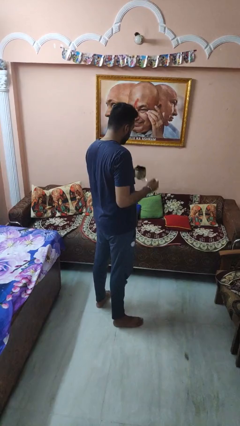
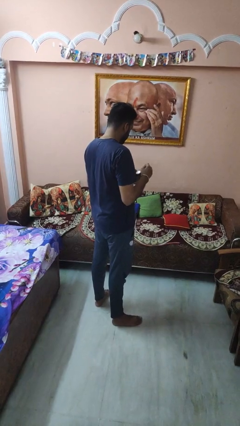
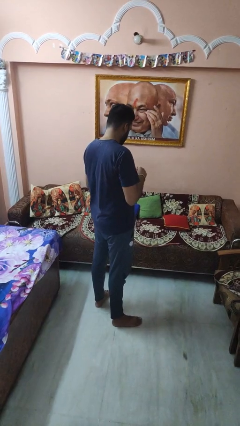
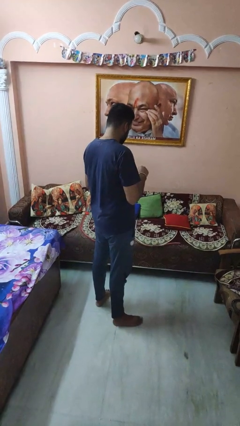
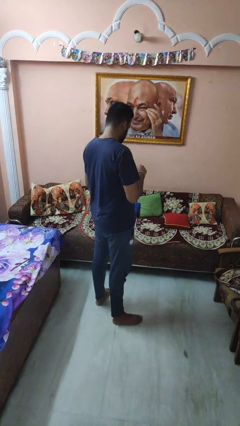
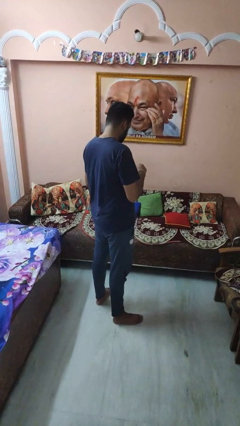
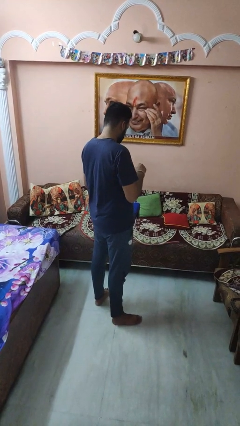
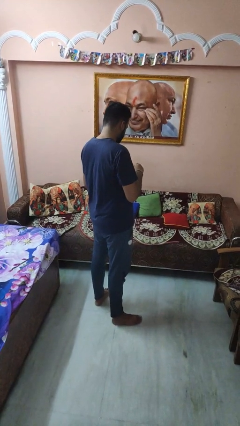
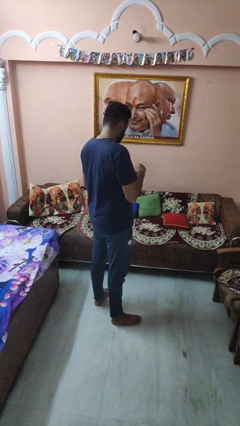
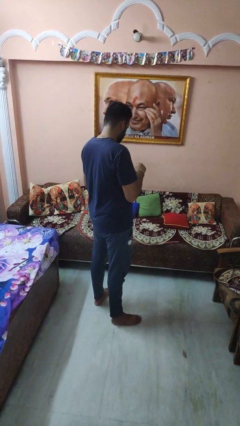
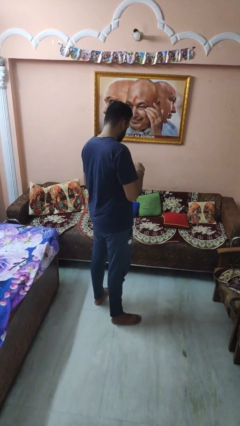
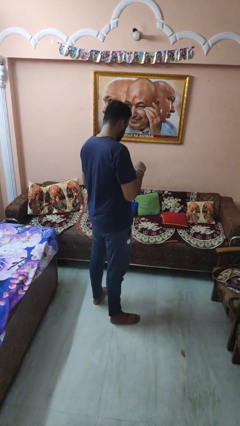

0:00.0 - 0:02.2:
person stirs mug

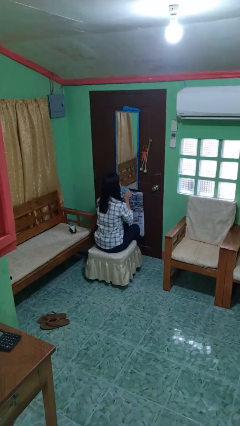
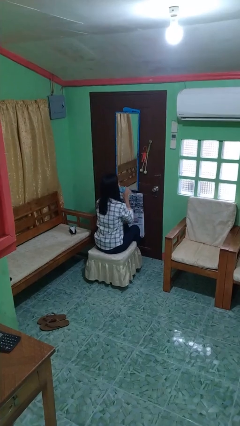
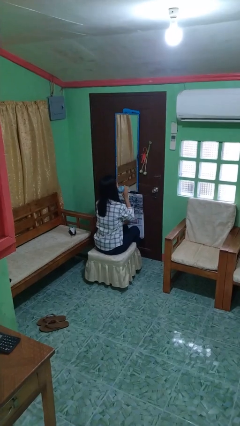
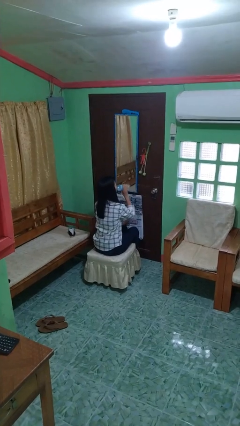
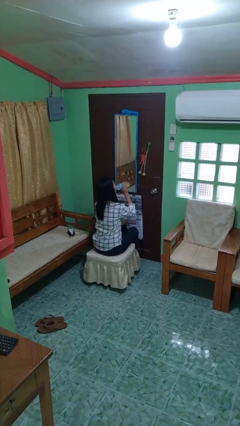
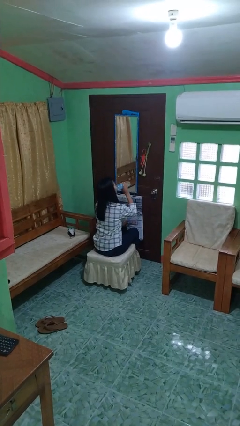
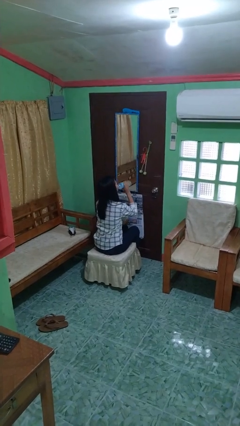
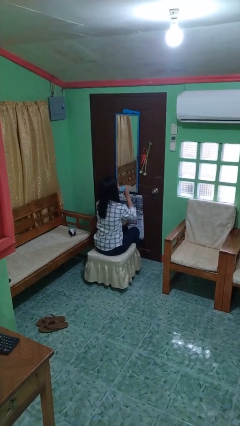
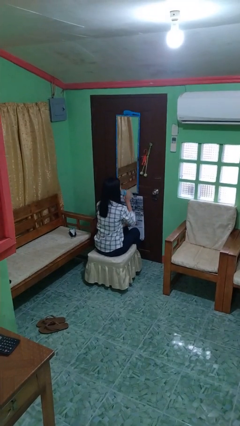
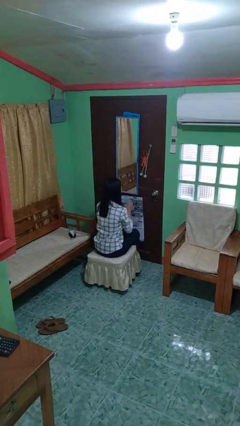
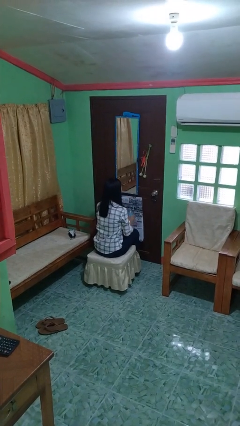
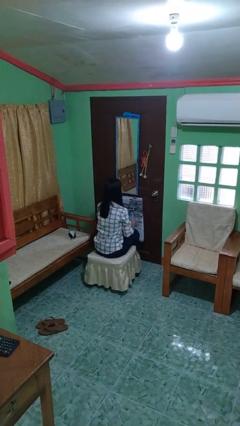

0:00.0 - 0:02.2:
person drinks from bottle

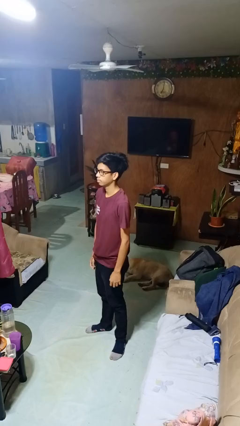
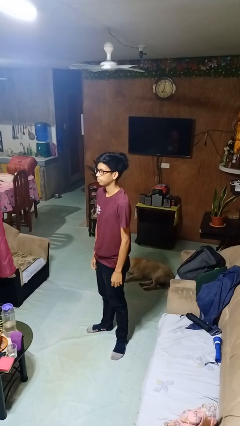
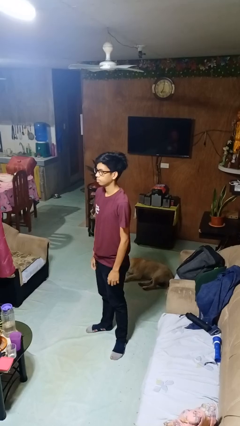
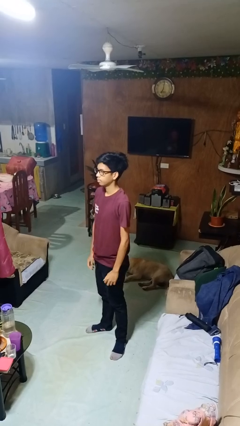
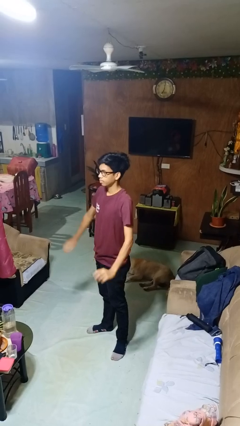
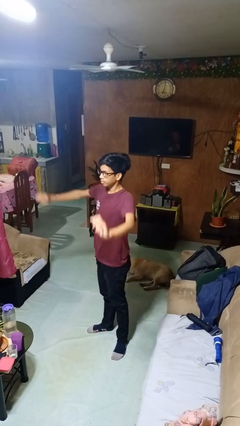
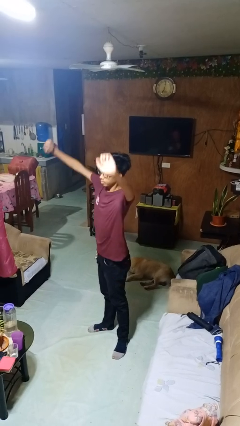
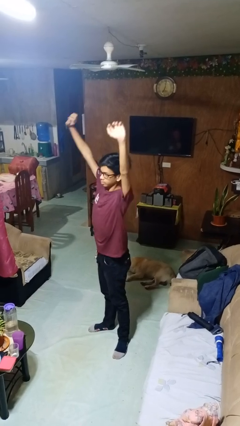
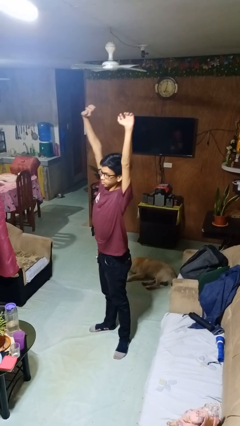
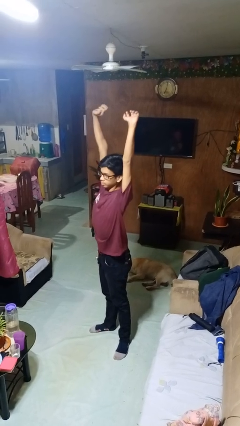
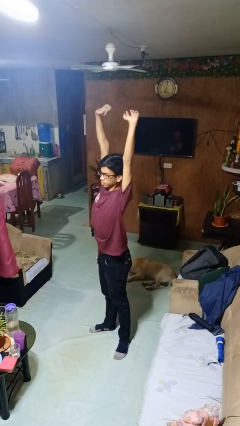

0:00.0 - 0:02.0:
person stretches arms over head

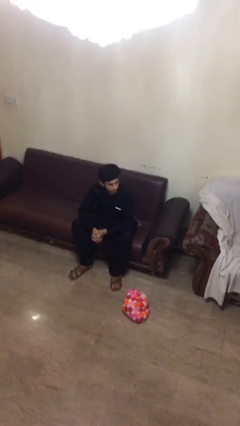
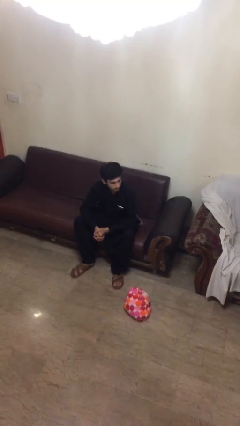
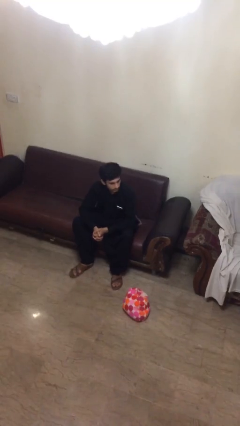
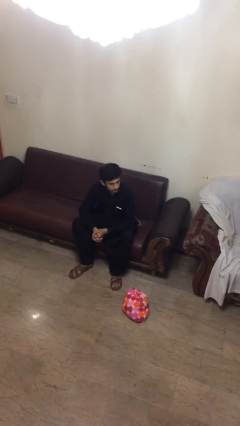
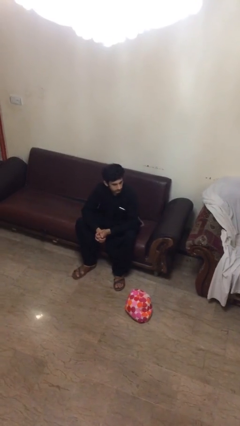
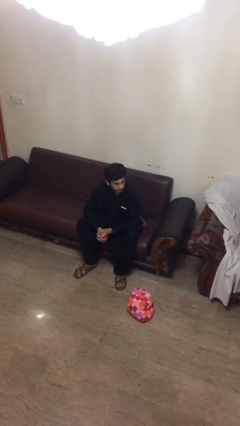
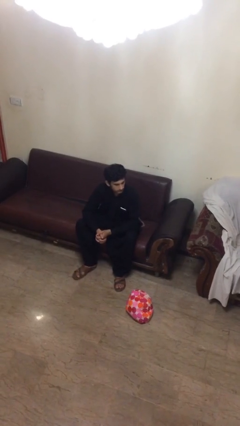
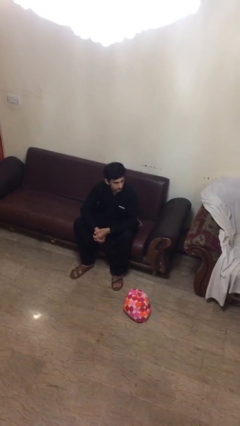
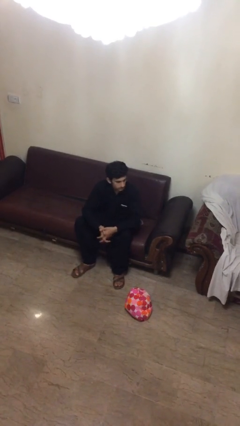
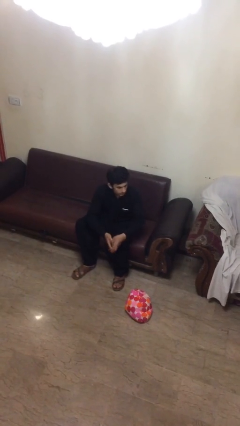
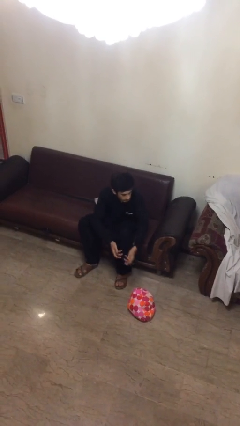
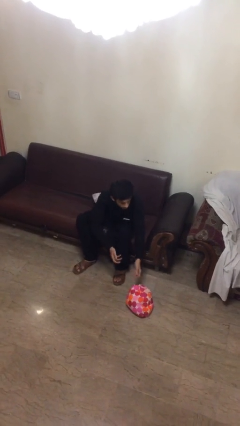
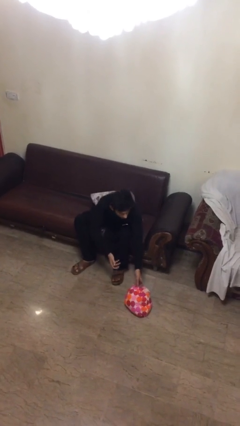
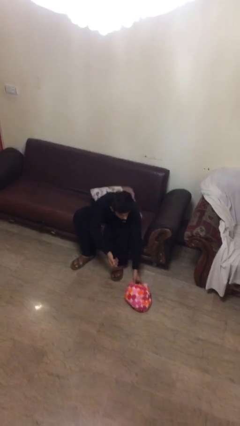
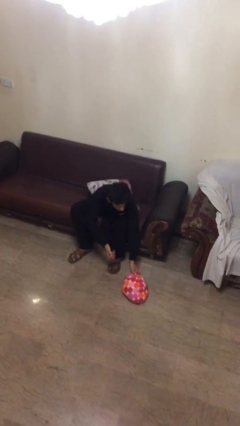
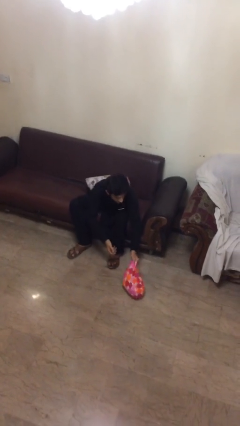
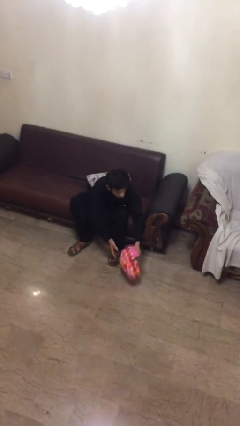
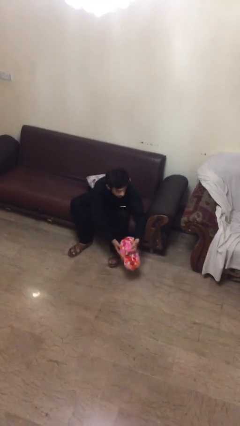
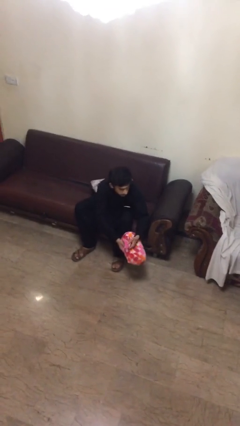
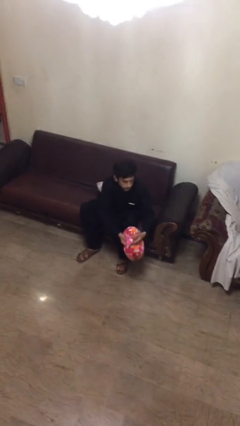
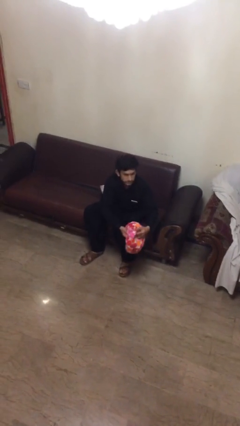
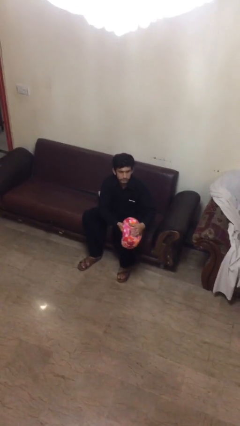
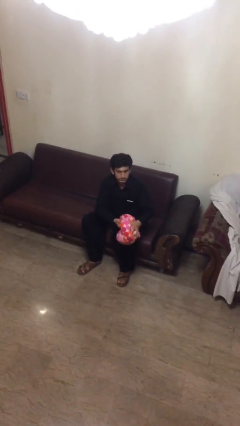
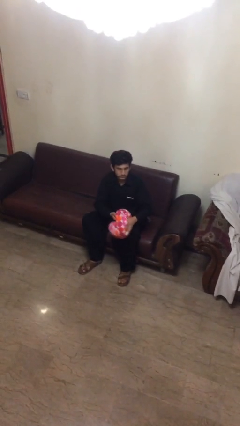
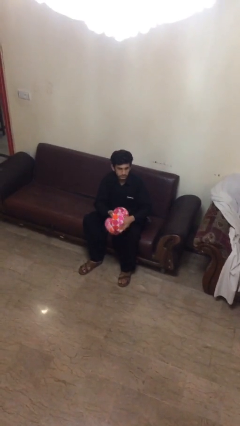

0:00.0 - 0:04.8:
person picks up object from floor

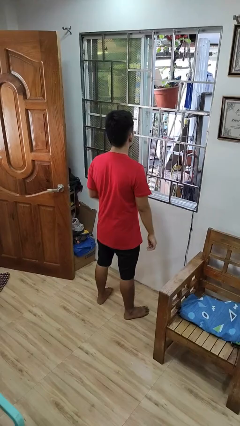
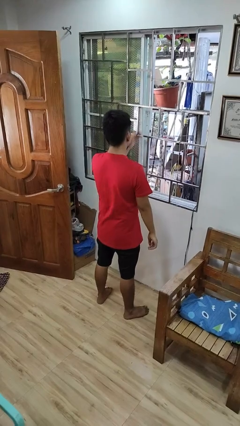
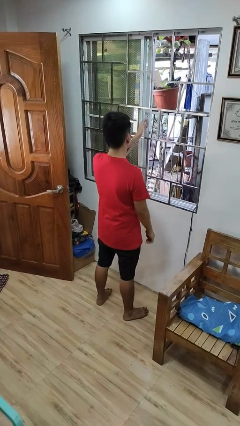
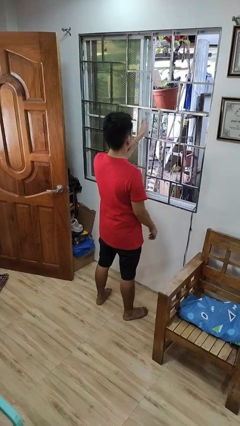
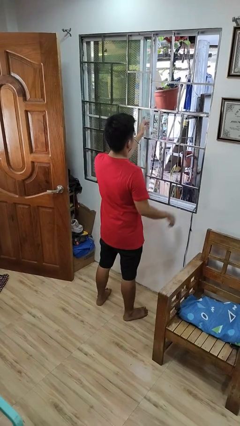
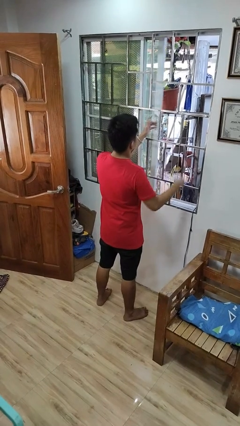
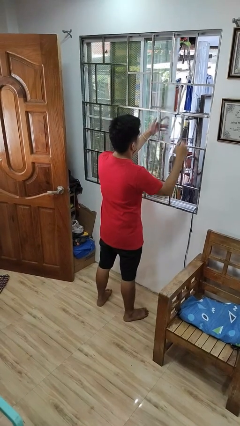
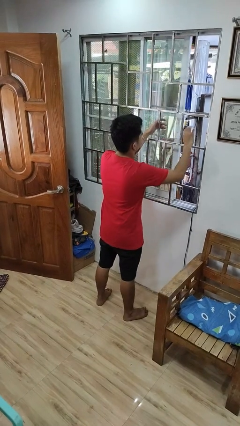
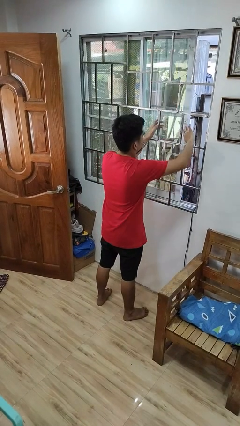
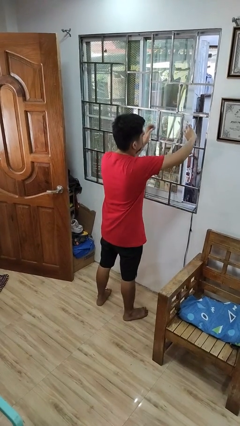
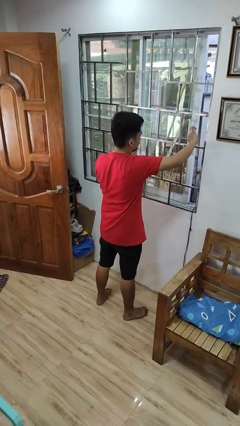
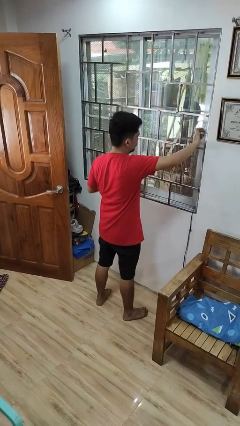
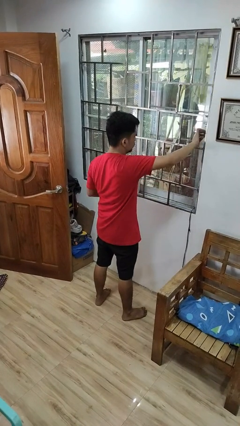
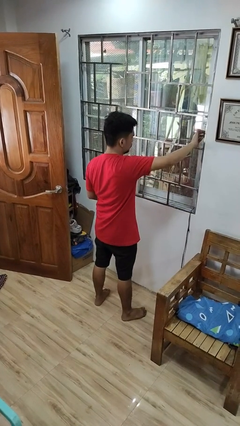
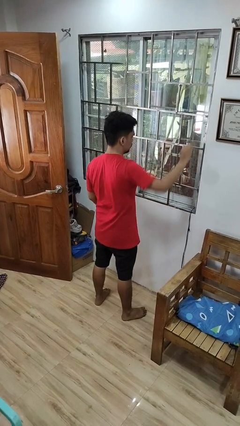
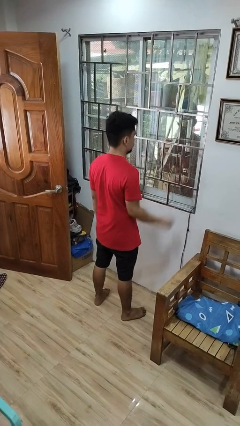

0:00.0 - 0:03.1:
person closes home window

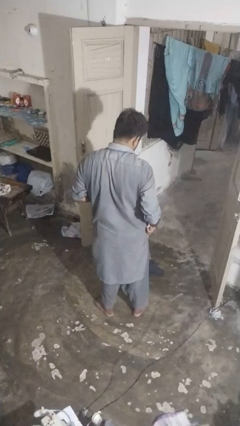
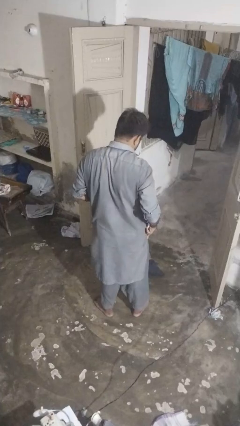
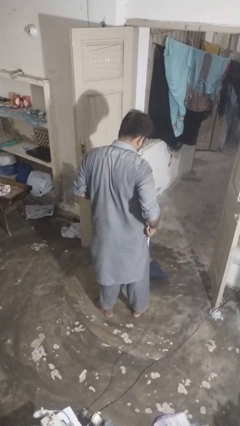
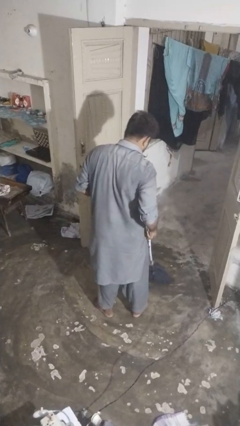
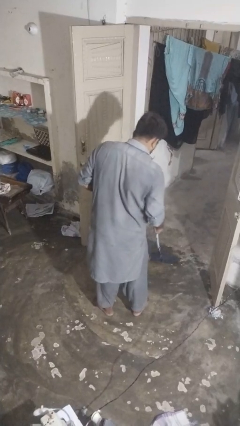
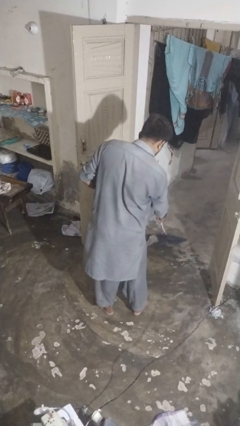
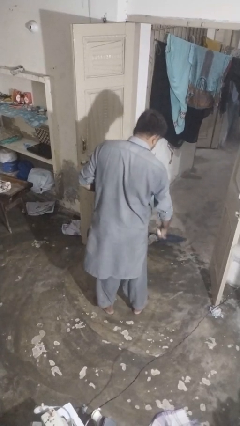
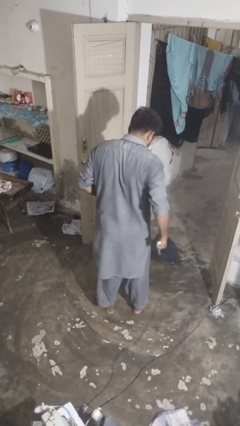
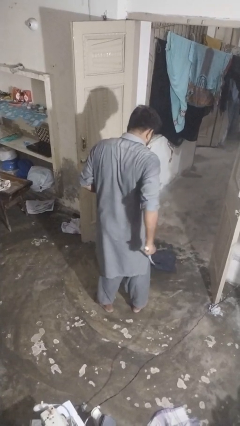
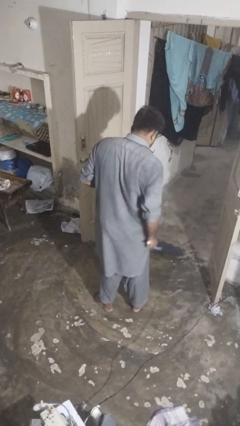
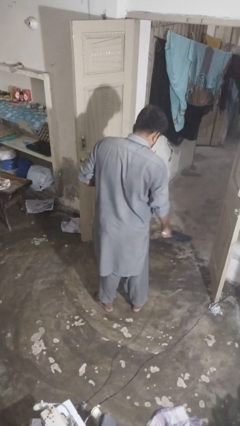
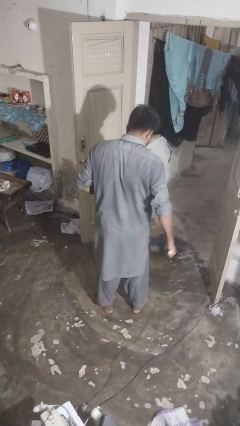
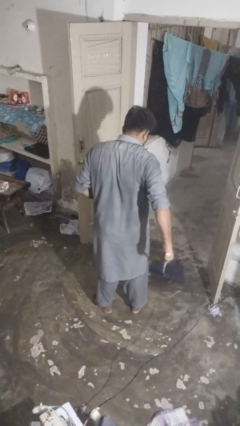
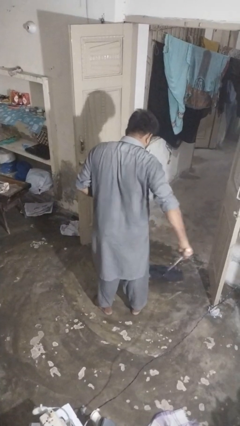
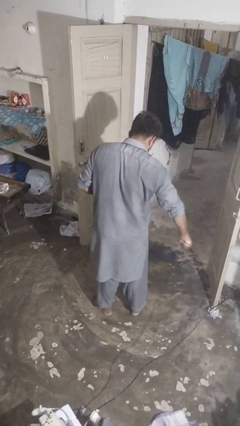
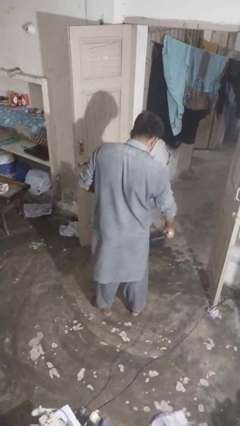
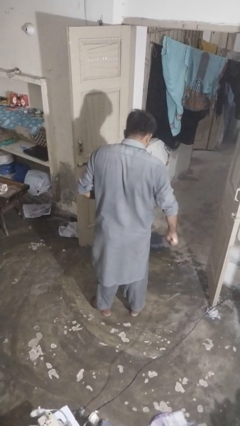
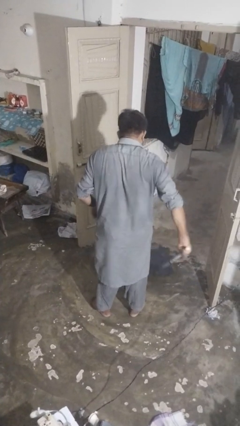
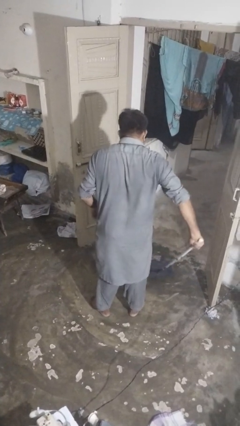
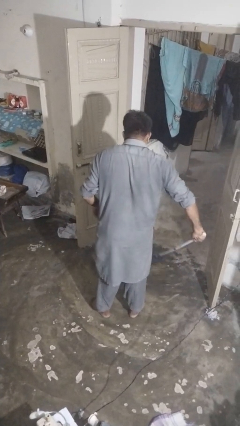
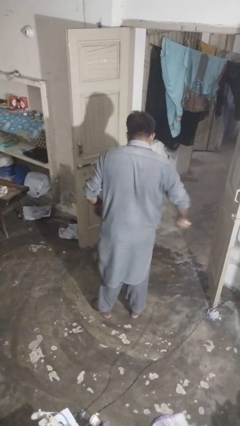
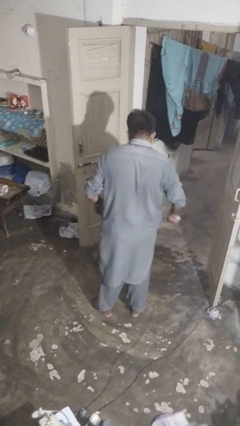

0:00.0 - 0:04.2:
person mops
